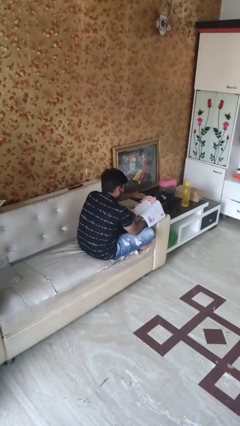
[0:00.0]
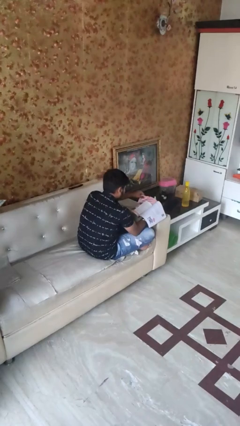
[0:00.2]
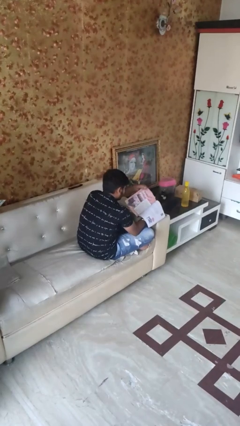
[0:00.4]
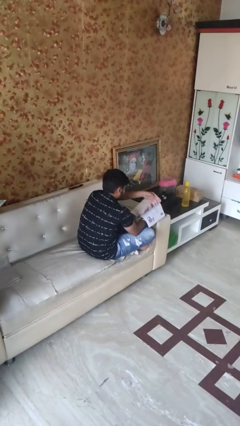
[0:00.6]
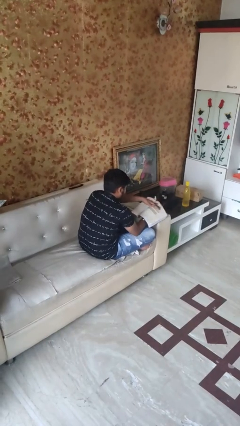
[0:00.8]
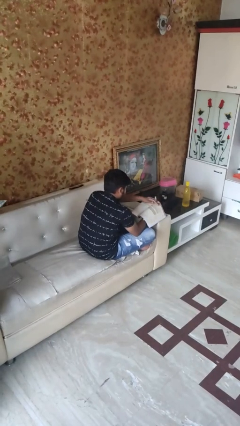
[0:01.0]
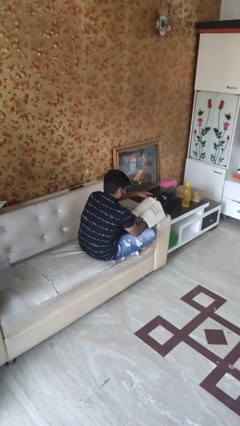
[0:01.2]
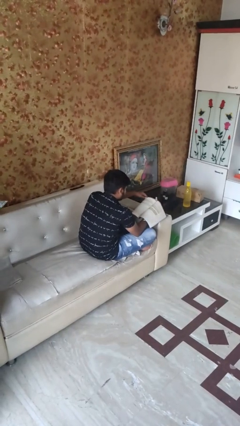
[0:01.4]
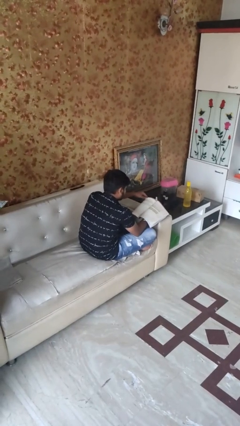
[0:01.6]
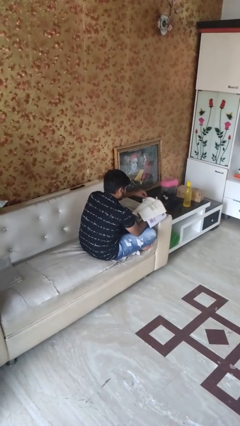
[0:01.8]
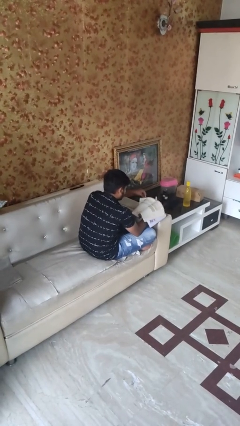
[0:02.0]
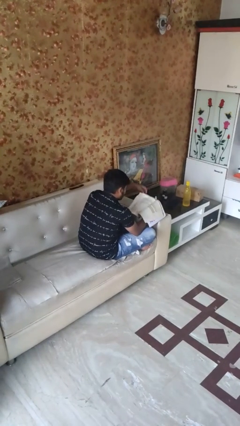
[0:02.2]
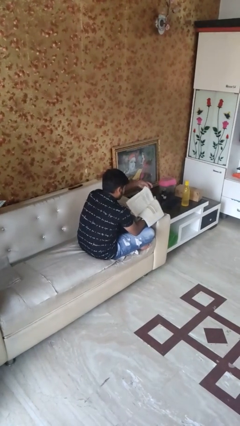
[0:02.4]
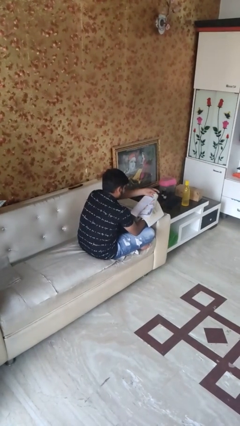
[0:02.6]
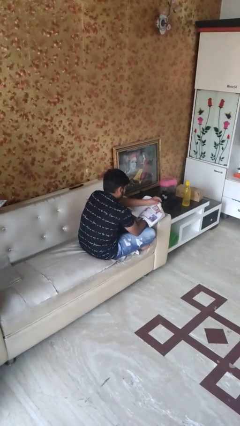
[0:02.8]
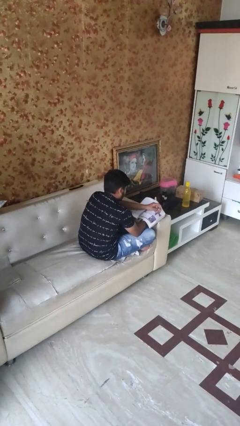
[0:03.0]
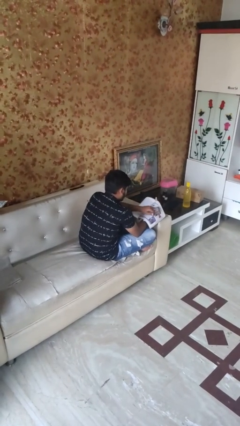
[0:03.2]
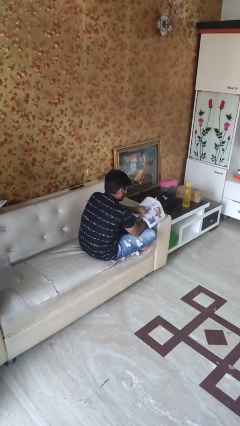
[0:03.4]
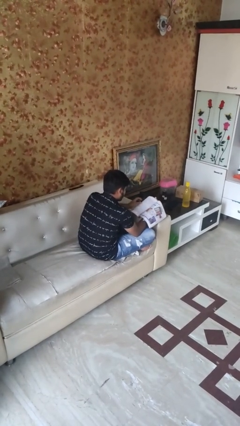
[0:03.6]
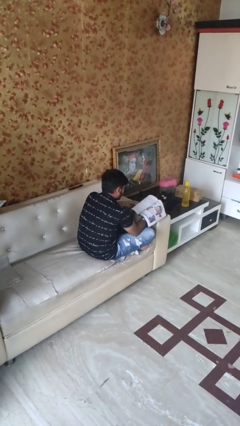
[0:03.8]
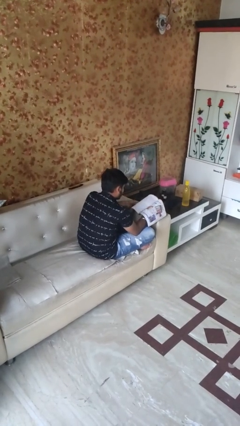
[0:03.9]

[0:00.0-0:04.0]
person reads magazine

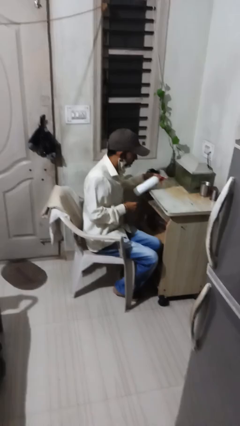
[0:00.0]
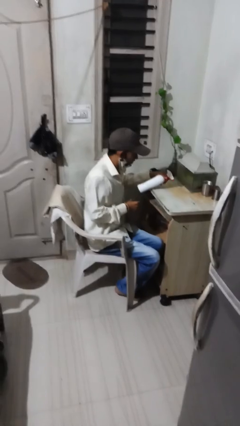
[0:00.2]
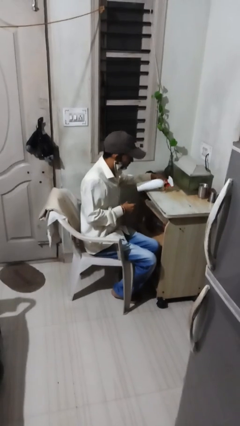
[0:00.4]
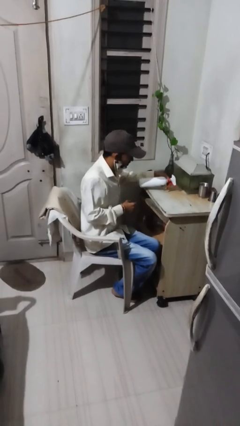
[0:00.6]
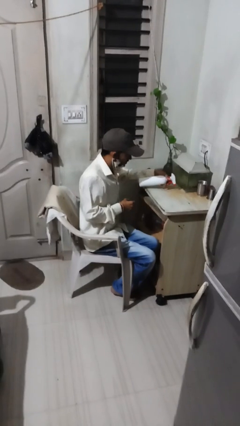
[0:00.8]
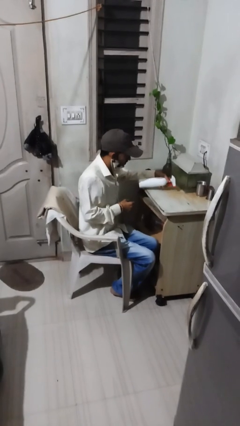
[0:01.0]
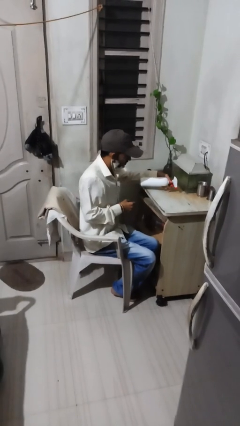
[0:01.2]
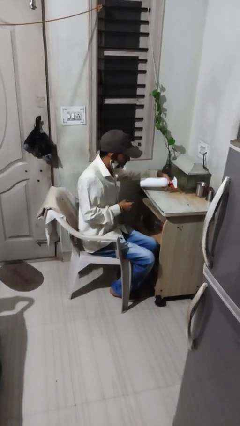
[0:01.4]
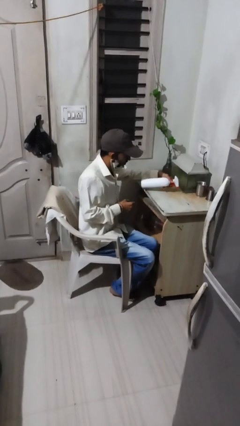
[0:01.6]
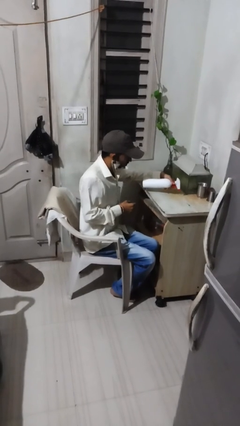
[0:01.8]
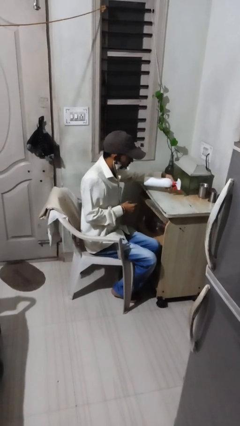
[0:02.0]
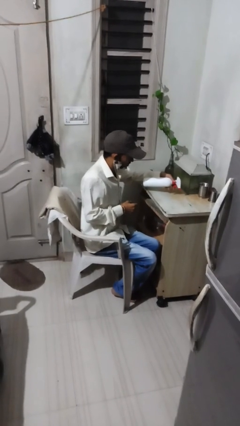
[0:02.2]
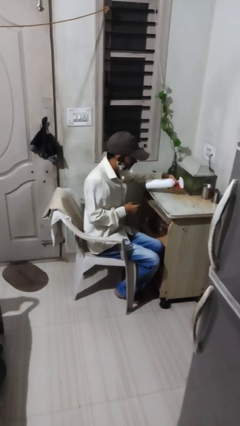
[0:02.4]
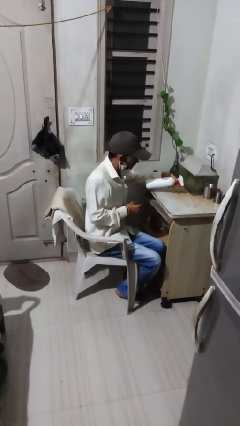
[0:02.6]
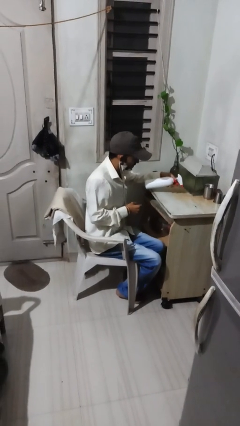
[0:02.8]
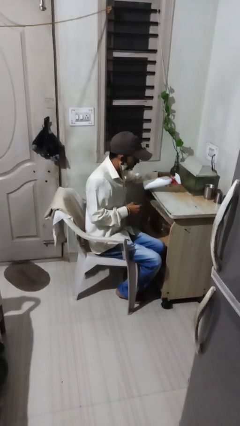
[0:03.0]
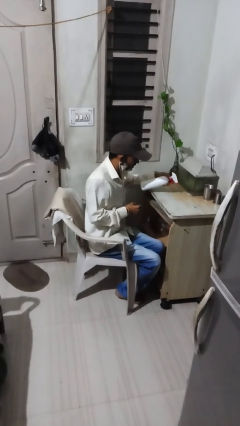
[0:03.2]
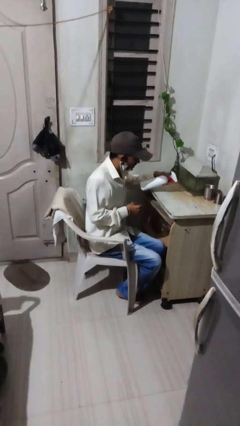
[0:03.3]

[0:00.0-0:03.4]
person sprays from bottle

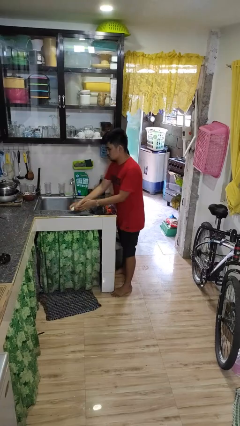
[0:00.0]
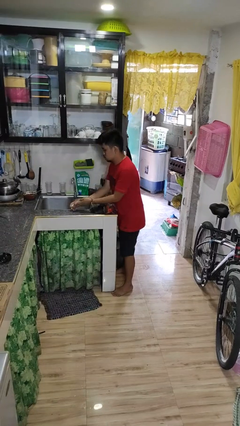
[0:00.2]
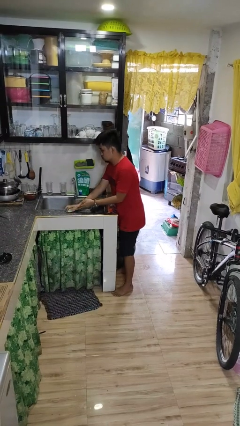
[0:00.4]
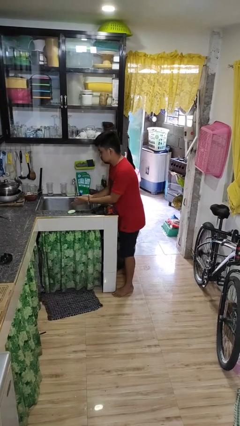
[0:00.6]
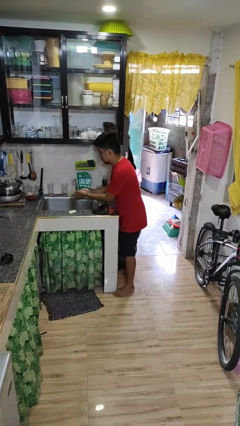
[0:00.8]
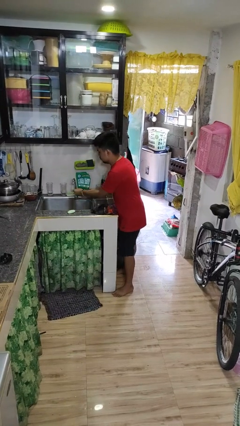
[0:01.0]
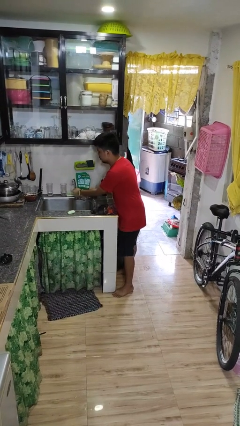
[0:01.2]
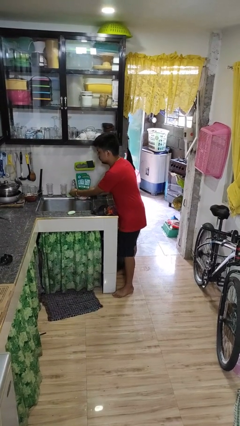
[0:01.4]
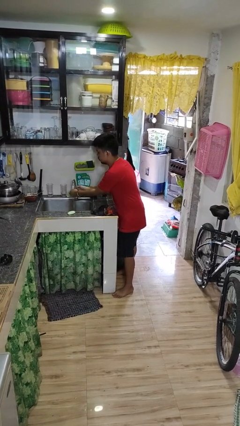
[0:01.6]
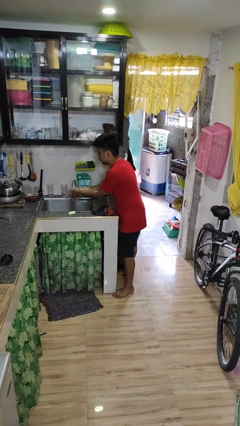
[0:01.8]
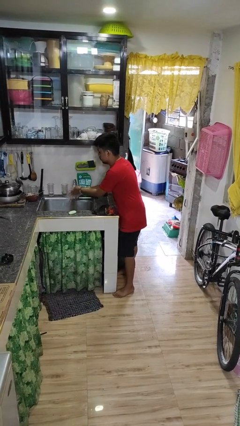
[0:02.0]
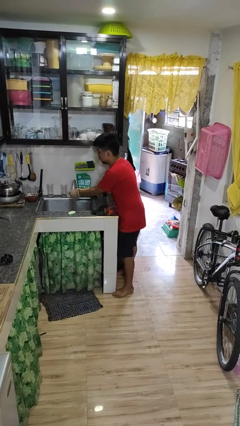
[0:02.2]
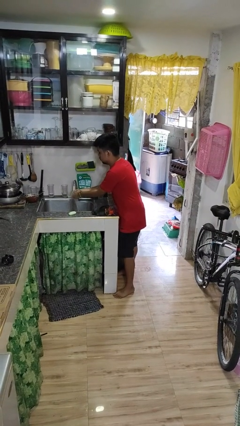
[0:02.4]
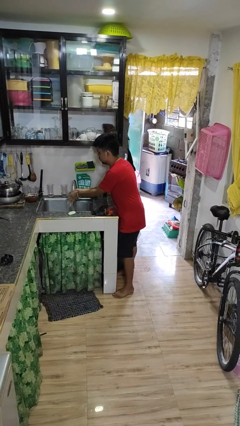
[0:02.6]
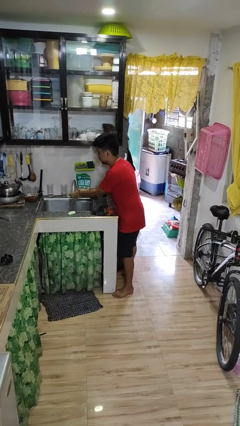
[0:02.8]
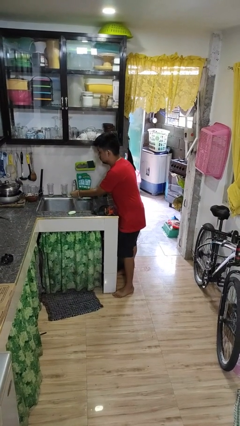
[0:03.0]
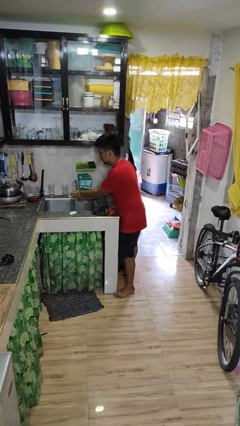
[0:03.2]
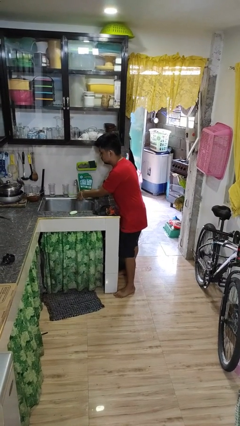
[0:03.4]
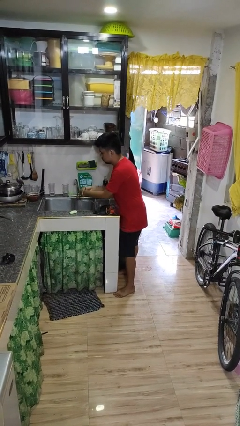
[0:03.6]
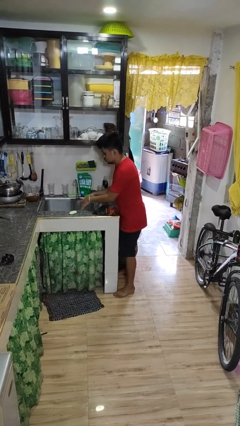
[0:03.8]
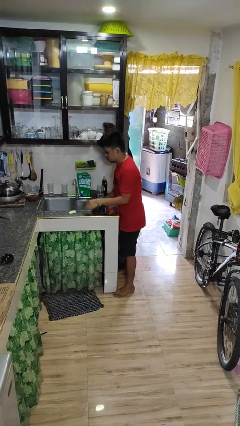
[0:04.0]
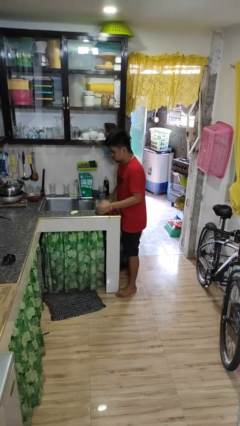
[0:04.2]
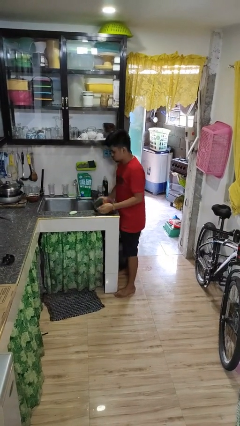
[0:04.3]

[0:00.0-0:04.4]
person washes hands

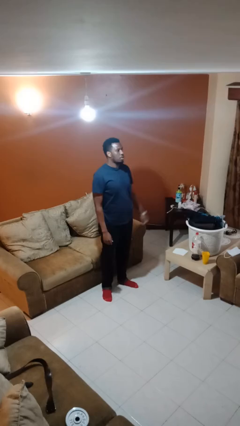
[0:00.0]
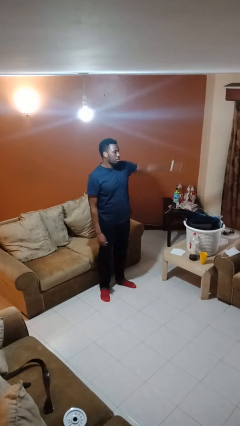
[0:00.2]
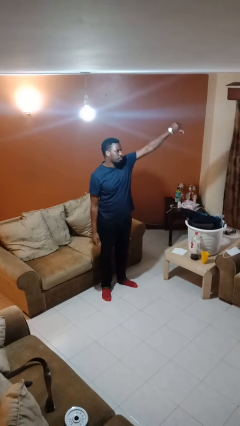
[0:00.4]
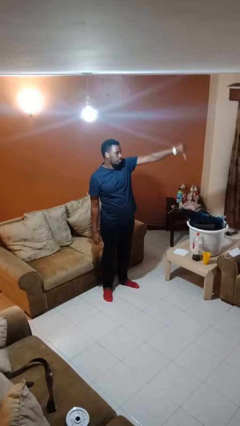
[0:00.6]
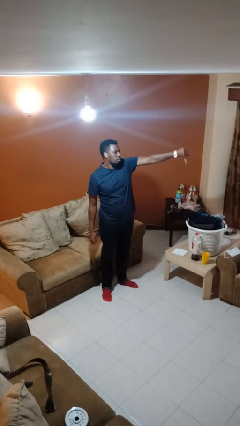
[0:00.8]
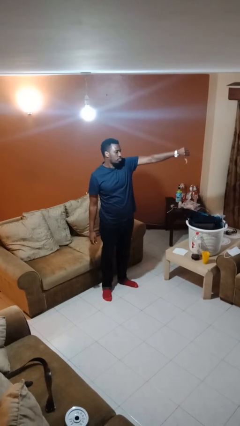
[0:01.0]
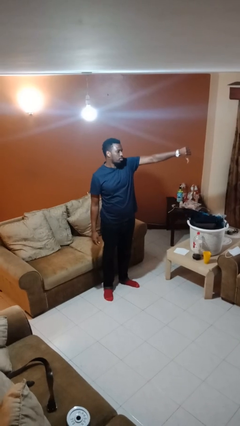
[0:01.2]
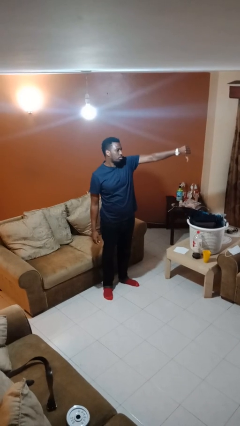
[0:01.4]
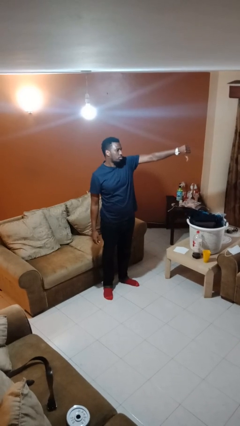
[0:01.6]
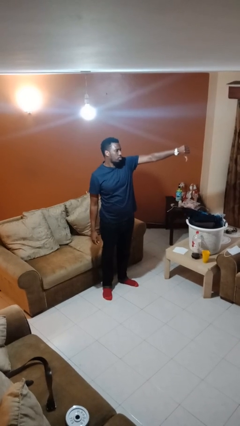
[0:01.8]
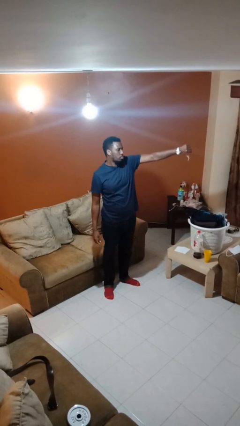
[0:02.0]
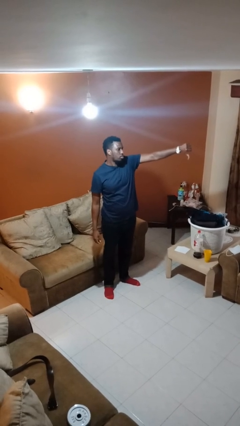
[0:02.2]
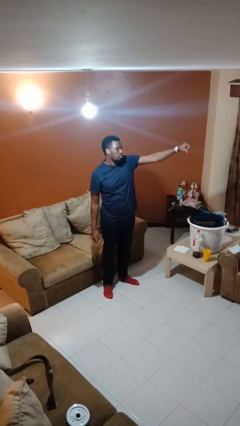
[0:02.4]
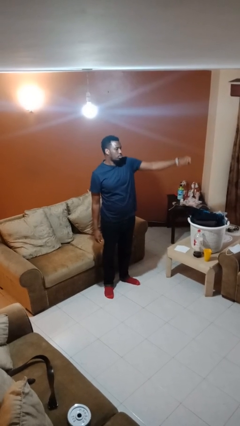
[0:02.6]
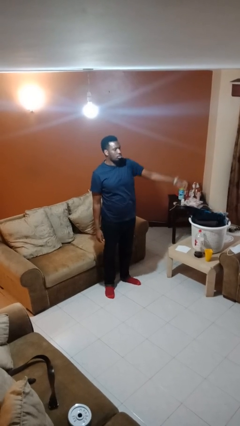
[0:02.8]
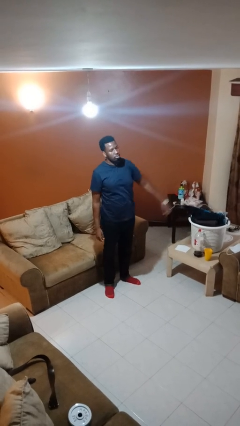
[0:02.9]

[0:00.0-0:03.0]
person gestures thumbs down

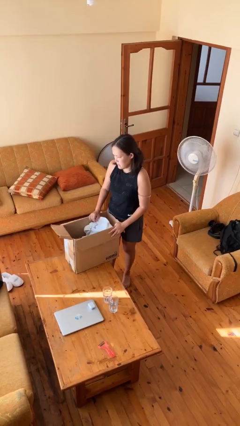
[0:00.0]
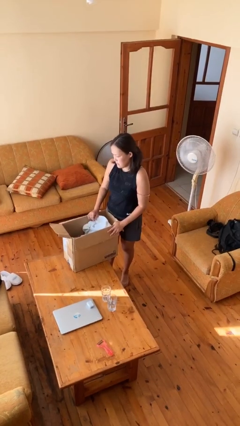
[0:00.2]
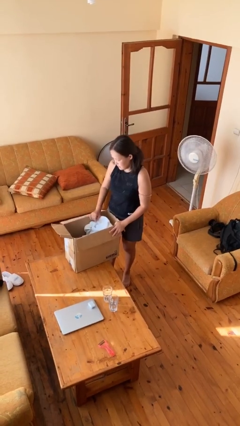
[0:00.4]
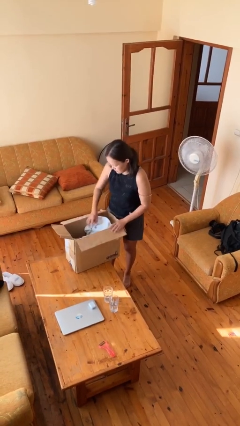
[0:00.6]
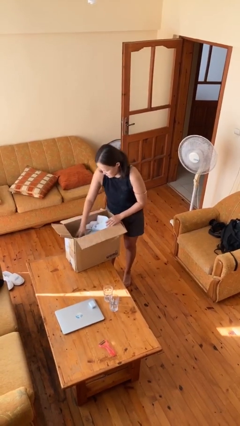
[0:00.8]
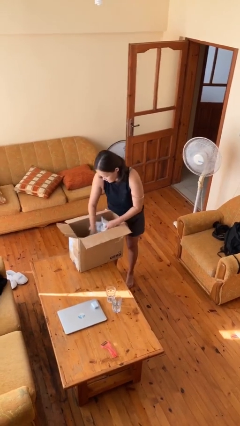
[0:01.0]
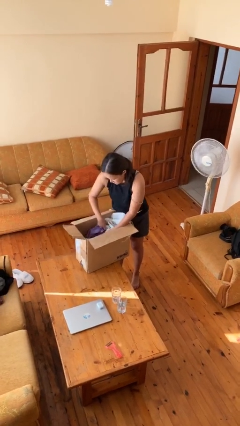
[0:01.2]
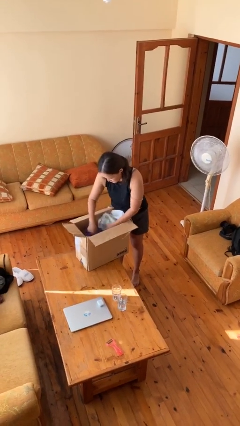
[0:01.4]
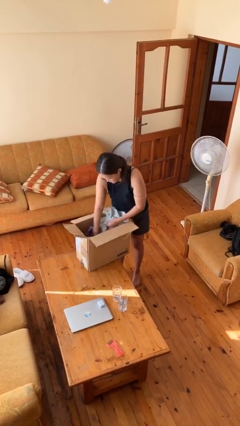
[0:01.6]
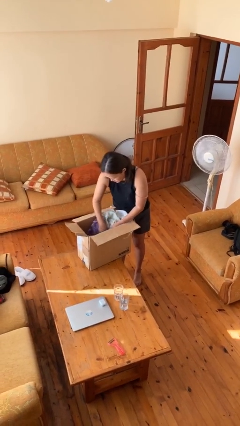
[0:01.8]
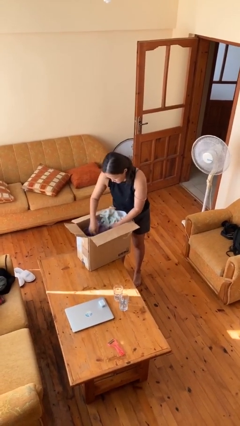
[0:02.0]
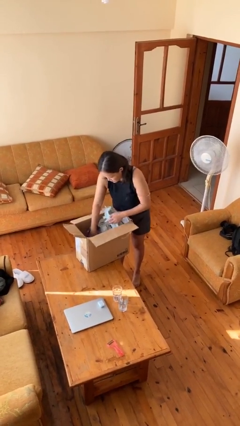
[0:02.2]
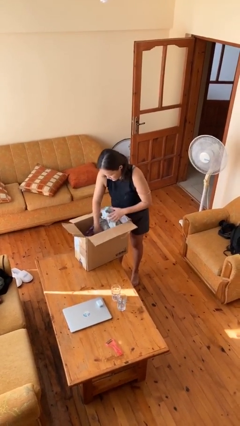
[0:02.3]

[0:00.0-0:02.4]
person searches in box
